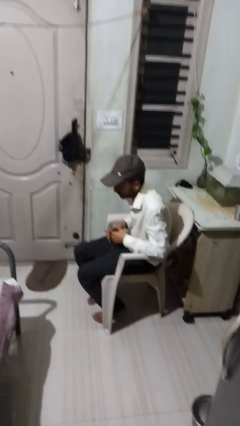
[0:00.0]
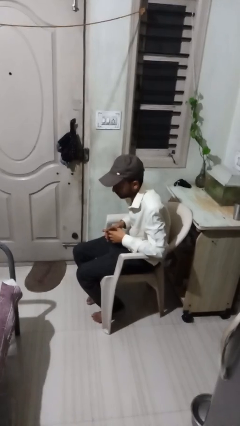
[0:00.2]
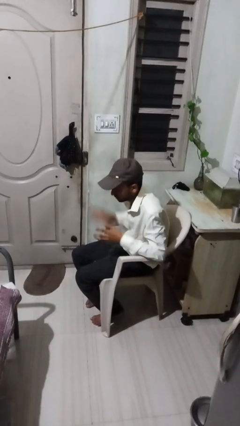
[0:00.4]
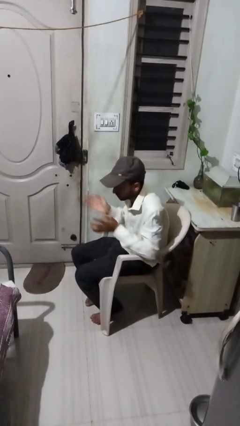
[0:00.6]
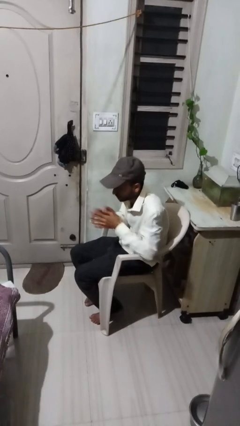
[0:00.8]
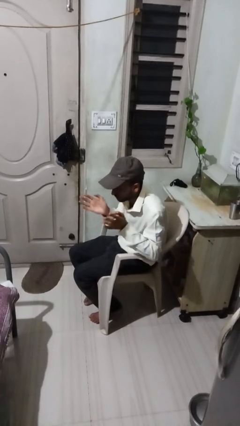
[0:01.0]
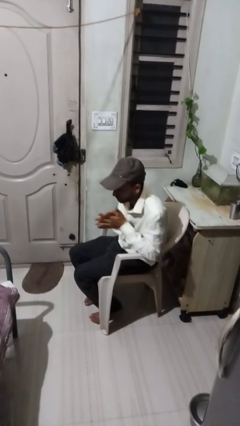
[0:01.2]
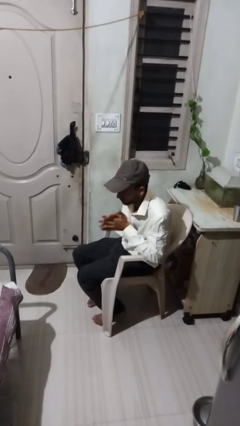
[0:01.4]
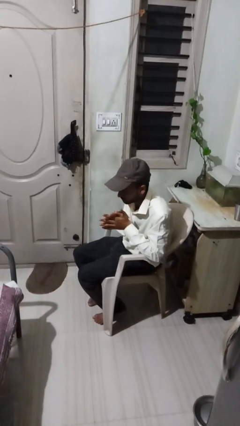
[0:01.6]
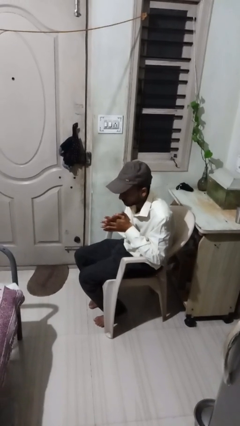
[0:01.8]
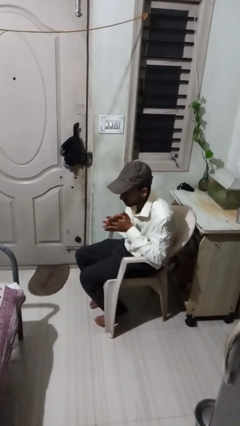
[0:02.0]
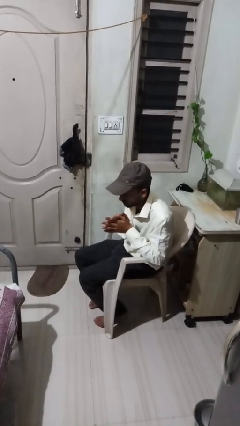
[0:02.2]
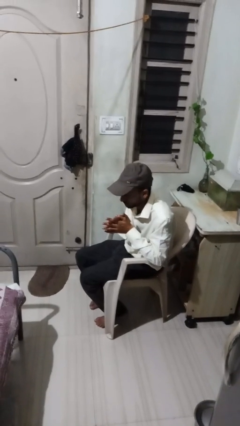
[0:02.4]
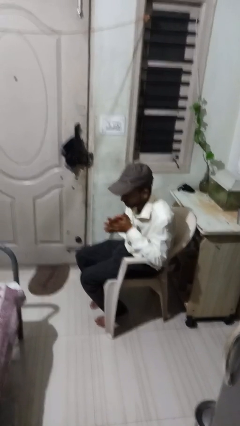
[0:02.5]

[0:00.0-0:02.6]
person claps hands

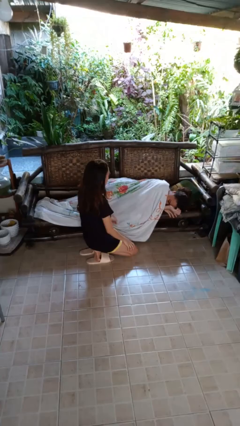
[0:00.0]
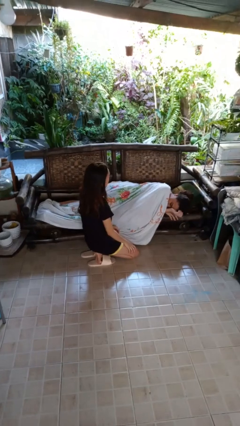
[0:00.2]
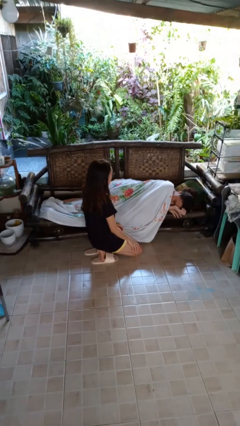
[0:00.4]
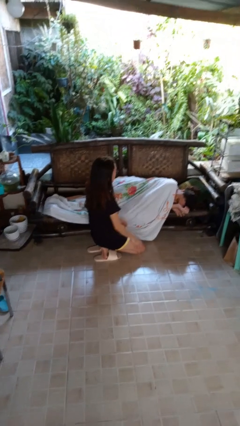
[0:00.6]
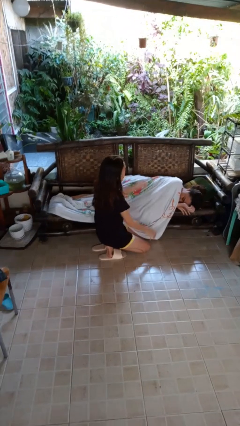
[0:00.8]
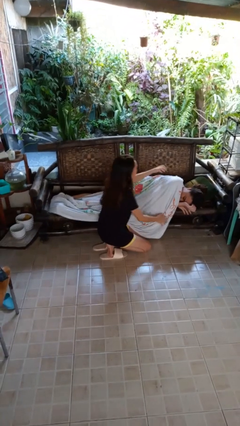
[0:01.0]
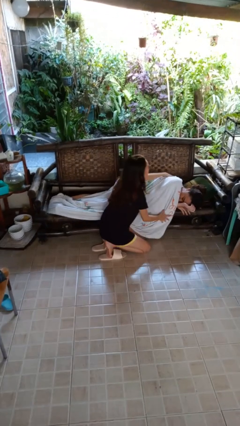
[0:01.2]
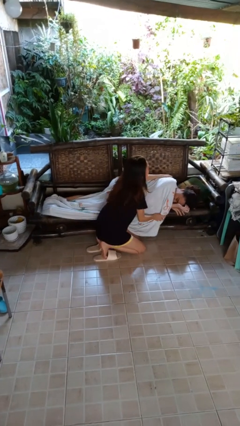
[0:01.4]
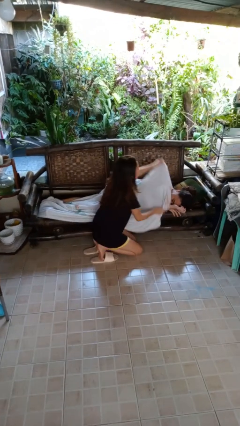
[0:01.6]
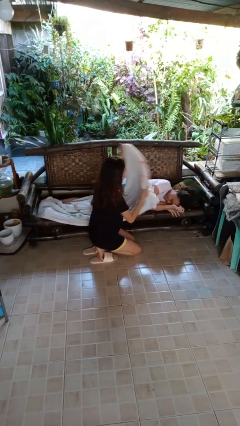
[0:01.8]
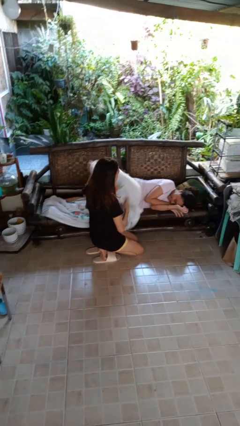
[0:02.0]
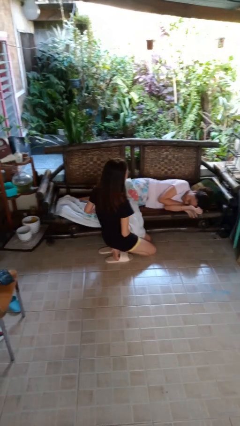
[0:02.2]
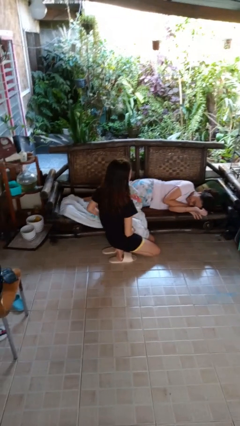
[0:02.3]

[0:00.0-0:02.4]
person uncovers friend with blanket

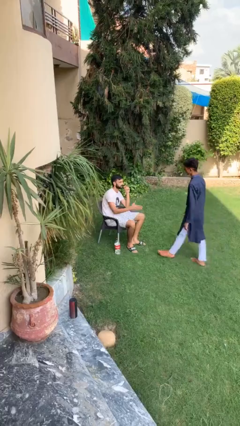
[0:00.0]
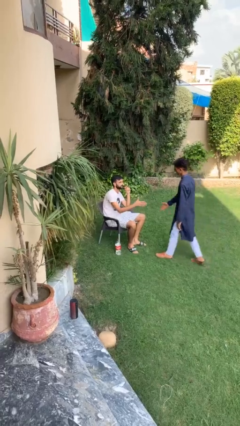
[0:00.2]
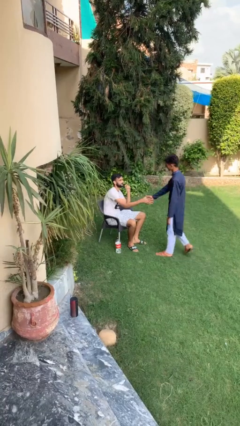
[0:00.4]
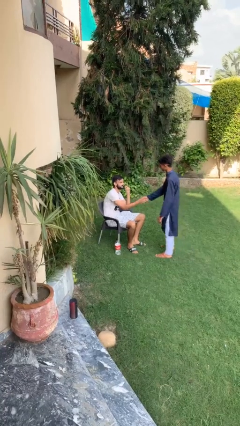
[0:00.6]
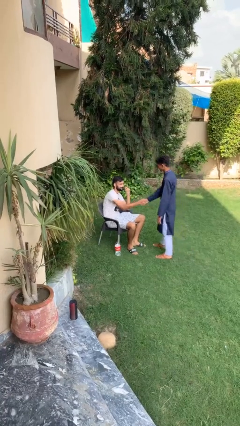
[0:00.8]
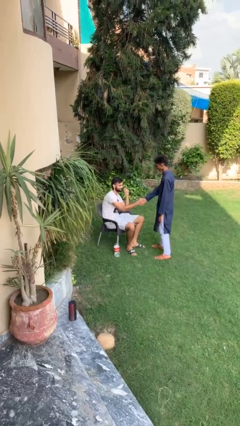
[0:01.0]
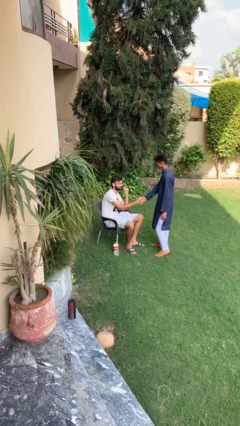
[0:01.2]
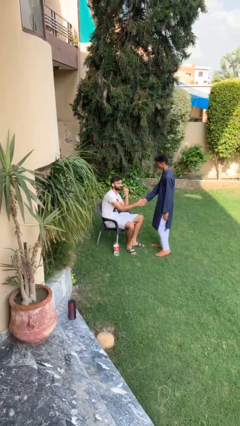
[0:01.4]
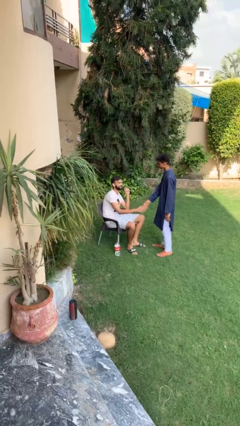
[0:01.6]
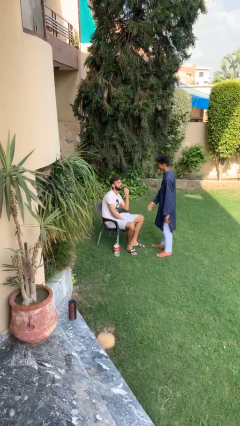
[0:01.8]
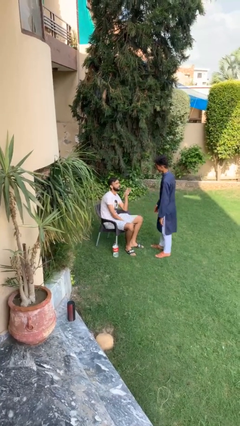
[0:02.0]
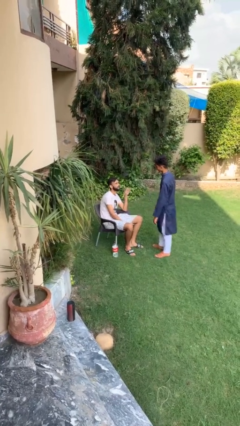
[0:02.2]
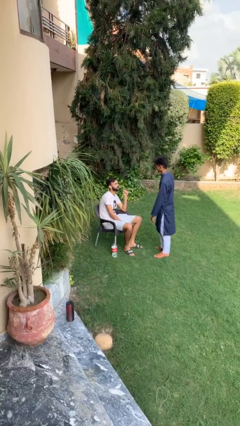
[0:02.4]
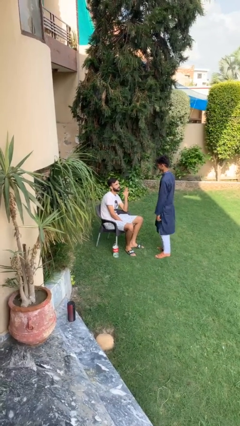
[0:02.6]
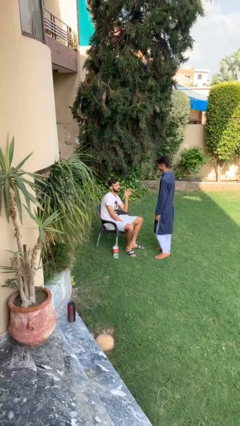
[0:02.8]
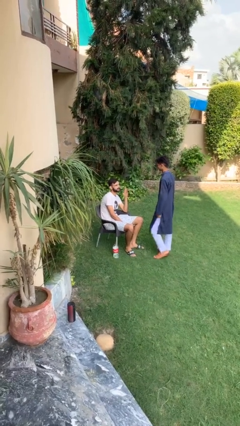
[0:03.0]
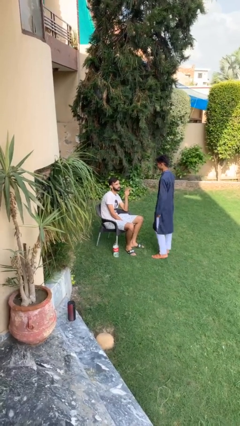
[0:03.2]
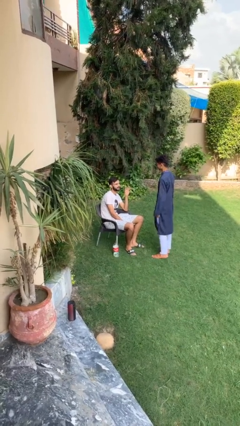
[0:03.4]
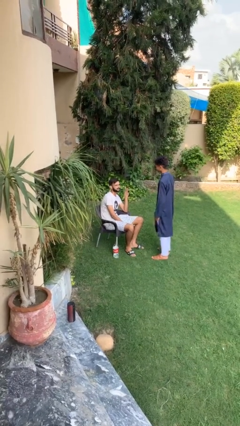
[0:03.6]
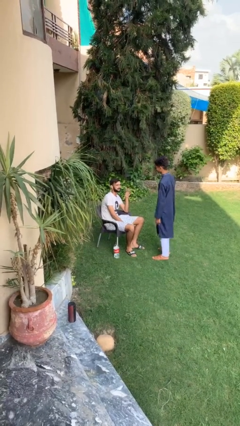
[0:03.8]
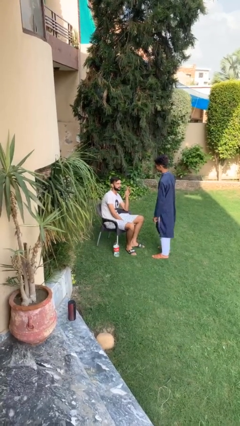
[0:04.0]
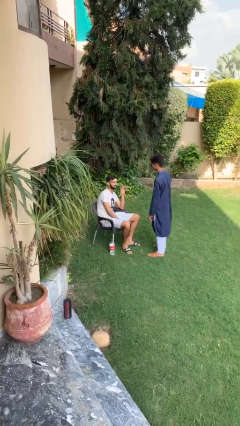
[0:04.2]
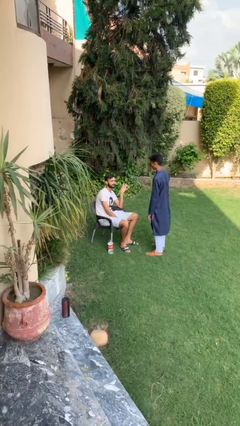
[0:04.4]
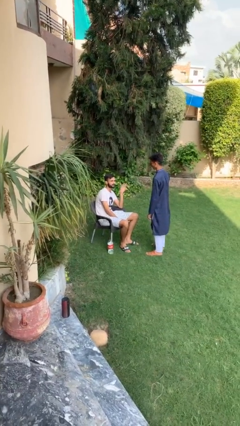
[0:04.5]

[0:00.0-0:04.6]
person shakes hand

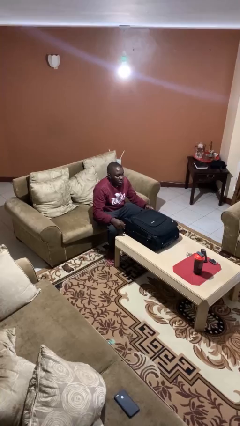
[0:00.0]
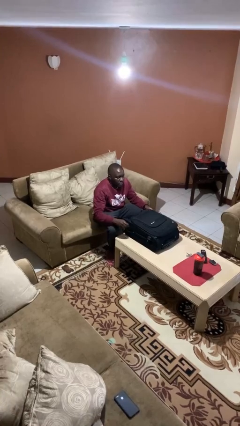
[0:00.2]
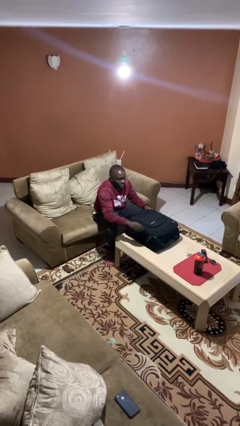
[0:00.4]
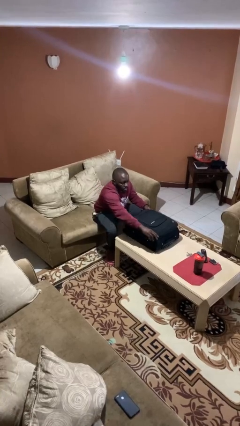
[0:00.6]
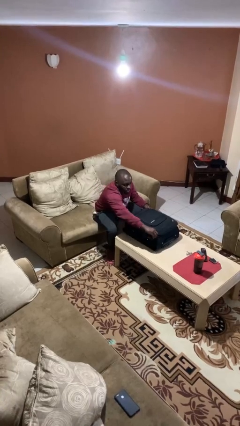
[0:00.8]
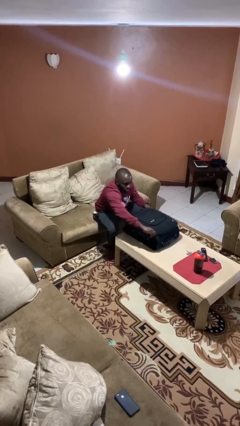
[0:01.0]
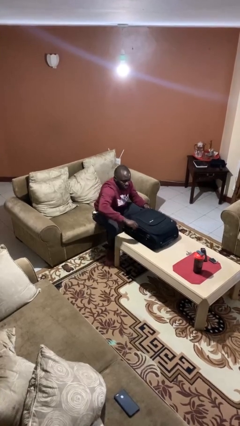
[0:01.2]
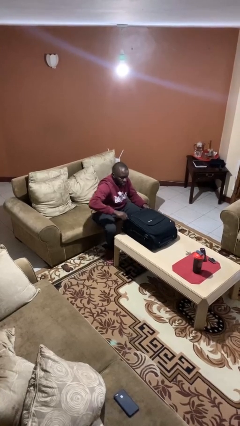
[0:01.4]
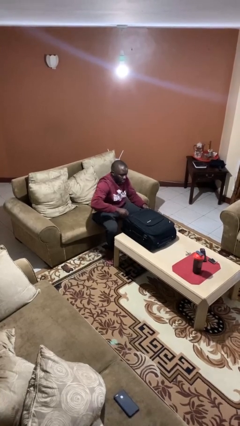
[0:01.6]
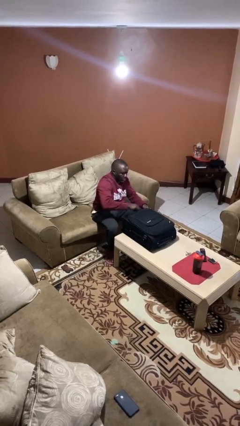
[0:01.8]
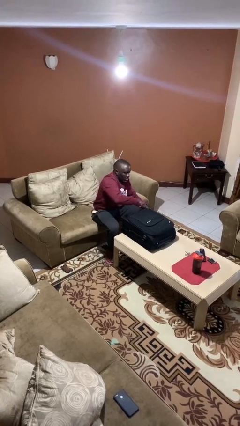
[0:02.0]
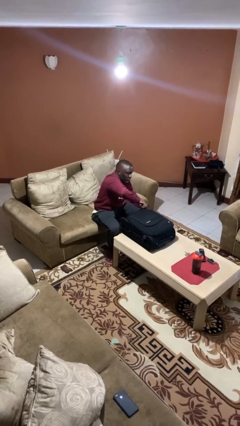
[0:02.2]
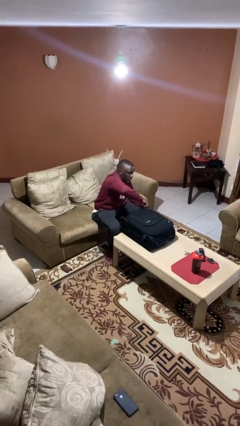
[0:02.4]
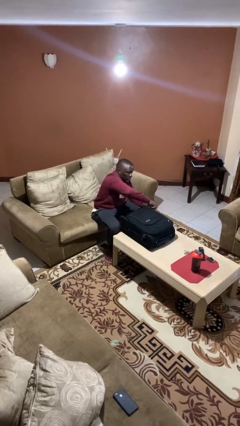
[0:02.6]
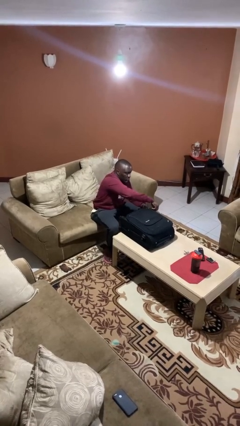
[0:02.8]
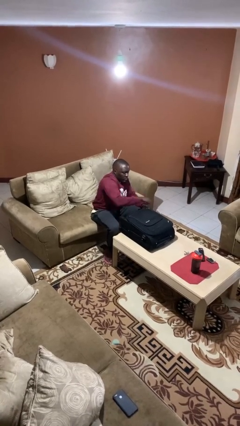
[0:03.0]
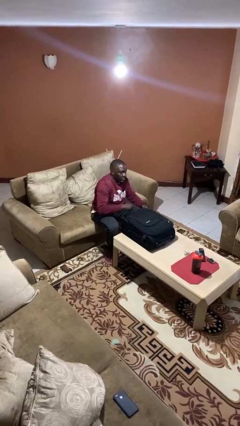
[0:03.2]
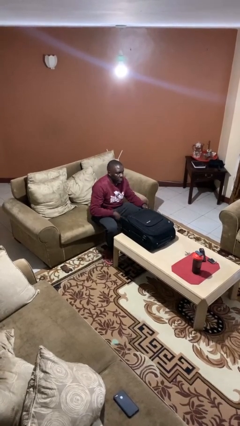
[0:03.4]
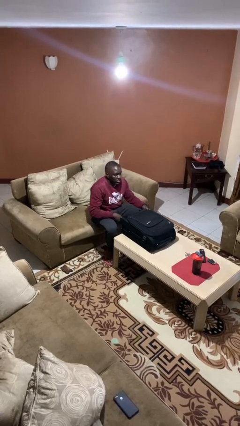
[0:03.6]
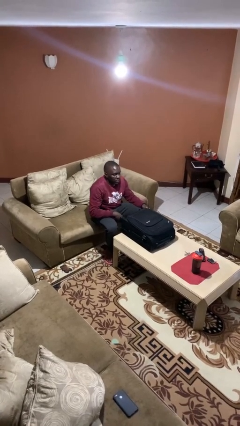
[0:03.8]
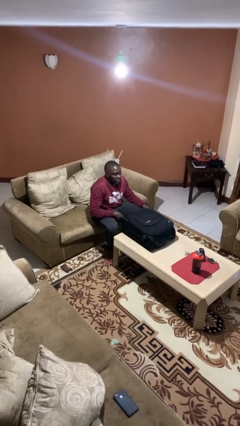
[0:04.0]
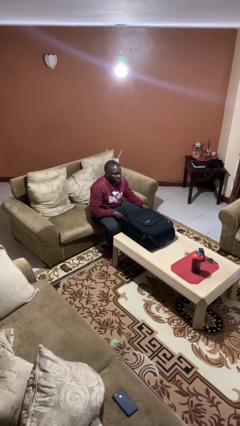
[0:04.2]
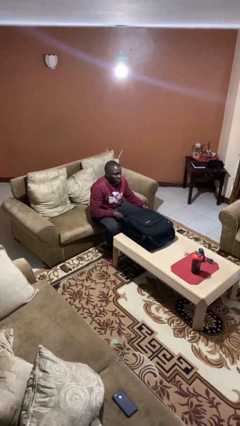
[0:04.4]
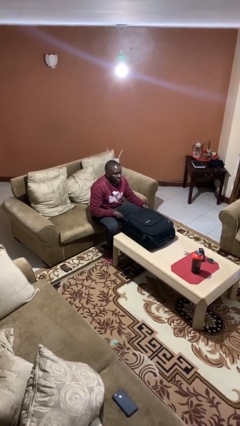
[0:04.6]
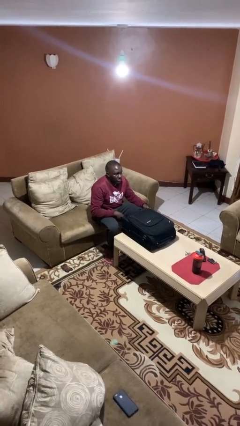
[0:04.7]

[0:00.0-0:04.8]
person opens suitcase

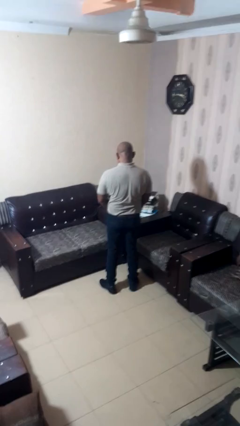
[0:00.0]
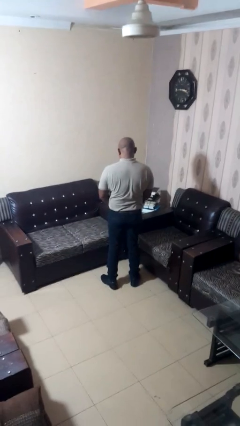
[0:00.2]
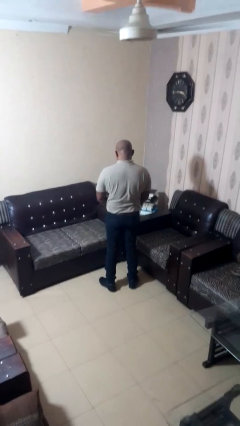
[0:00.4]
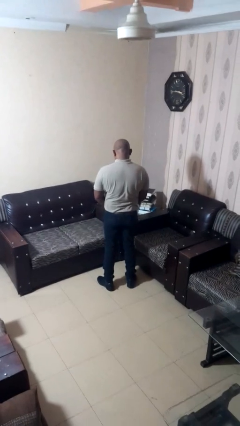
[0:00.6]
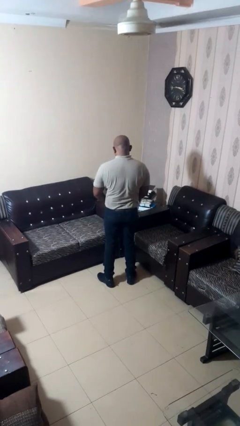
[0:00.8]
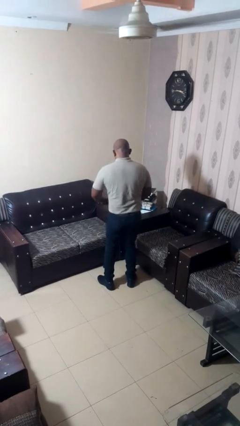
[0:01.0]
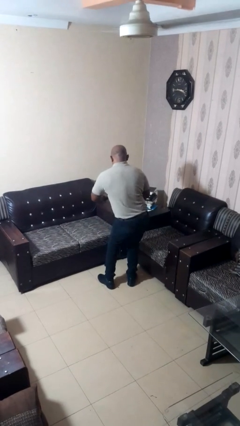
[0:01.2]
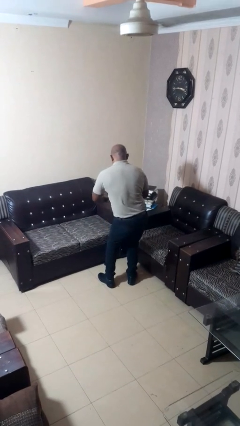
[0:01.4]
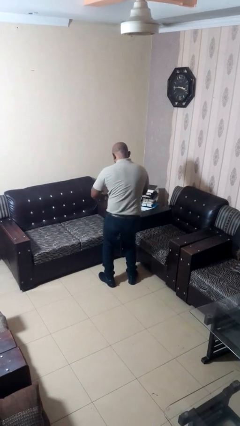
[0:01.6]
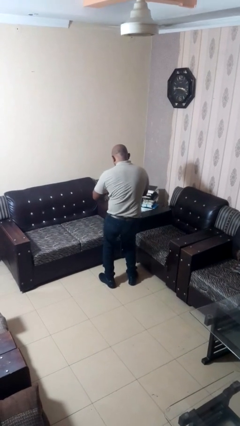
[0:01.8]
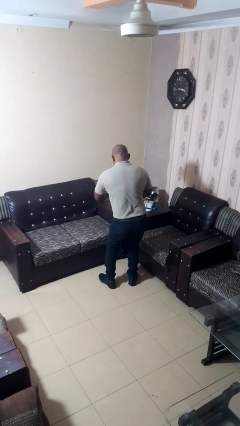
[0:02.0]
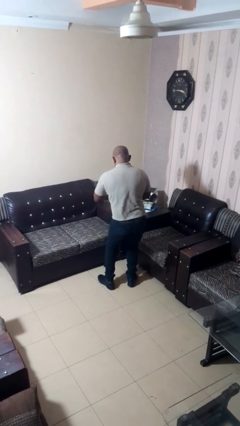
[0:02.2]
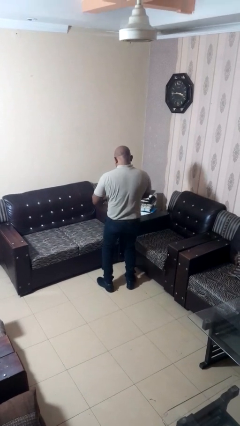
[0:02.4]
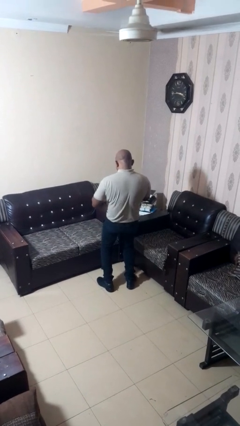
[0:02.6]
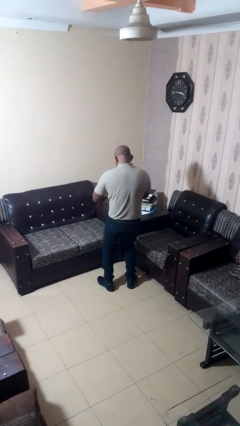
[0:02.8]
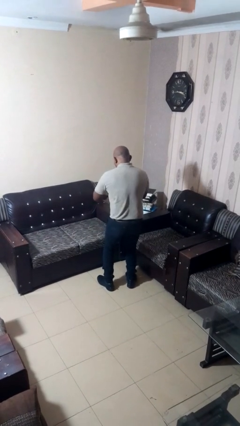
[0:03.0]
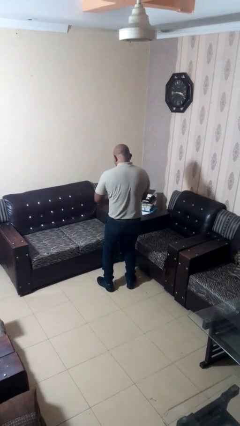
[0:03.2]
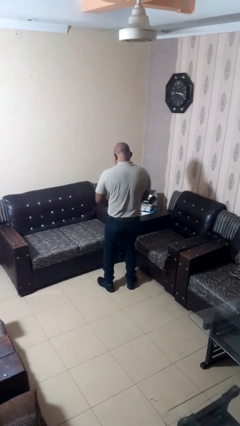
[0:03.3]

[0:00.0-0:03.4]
person wiggles hips
